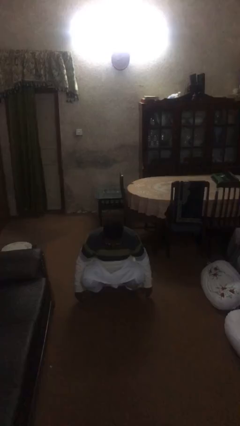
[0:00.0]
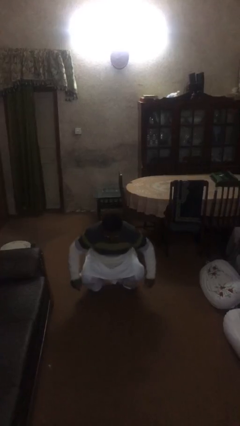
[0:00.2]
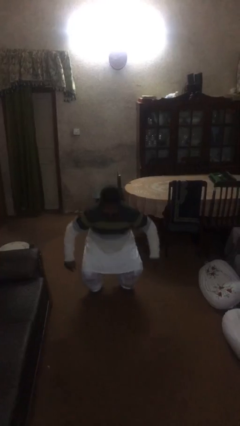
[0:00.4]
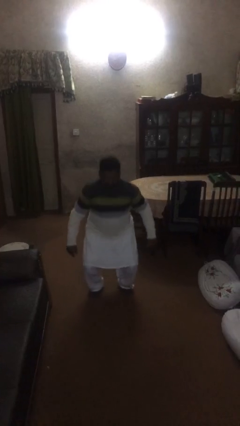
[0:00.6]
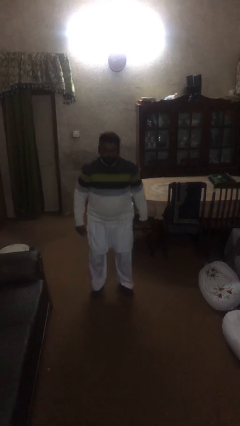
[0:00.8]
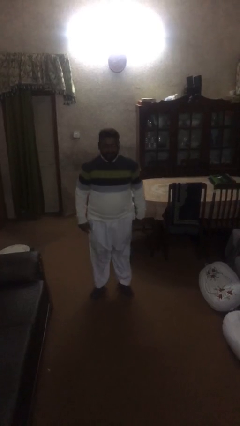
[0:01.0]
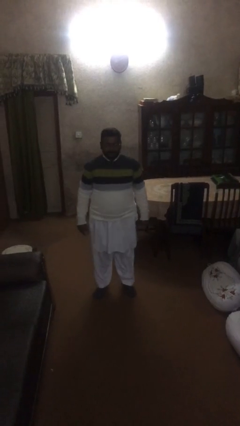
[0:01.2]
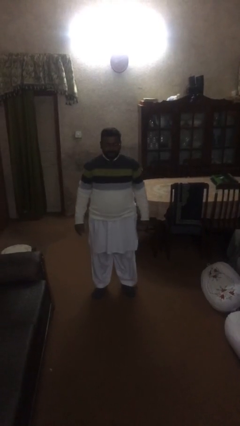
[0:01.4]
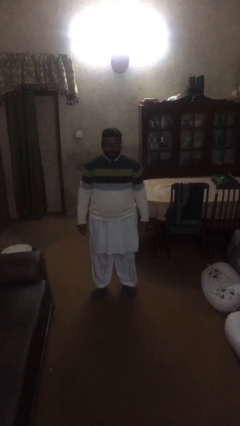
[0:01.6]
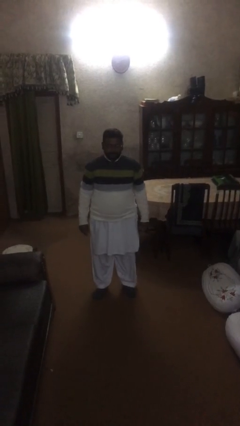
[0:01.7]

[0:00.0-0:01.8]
person stands up

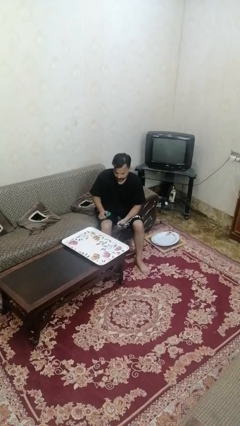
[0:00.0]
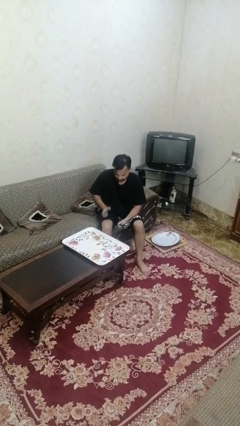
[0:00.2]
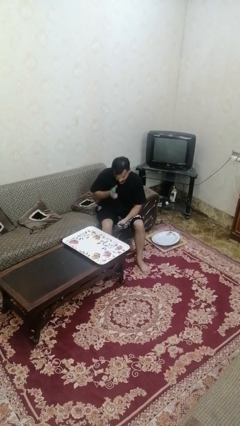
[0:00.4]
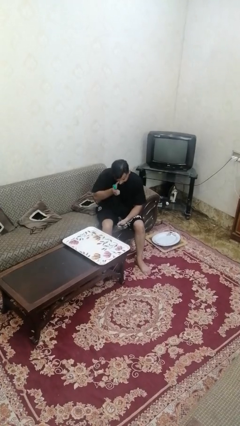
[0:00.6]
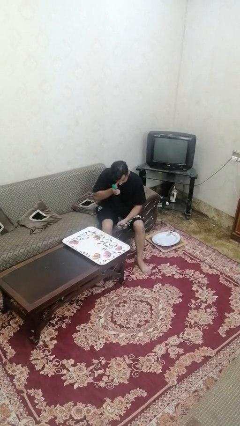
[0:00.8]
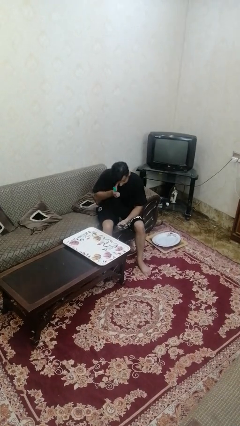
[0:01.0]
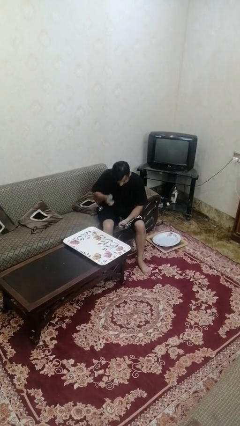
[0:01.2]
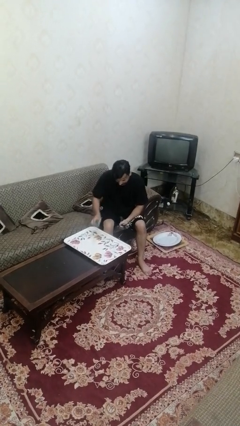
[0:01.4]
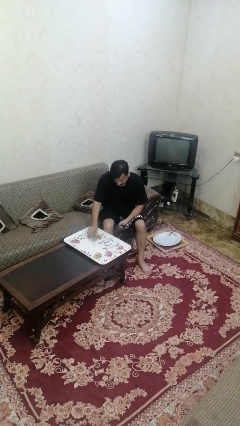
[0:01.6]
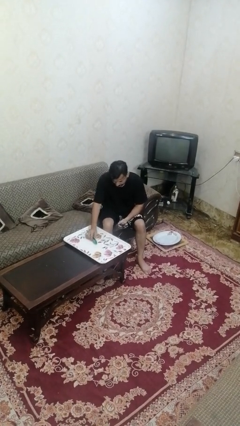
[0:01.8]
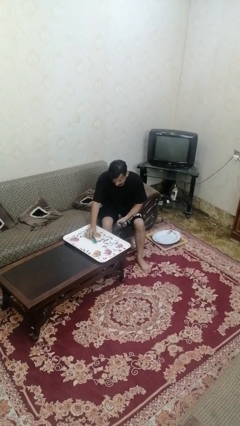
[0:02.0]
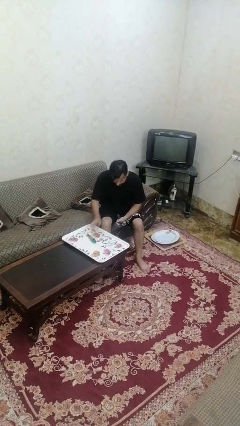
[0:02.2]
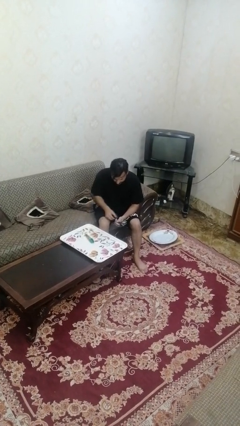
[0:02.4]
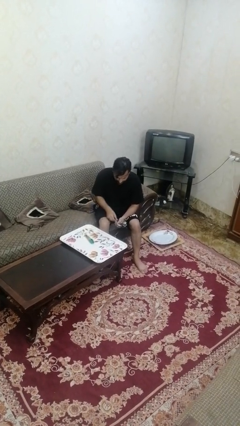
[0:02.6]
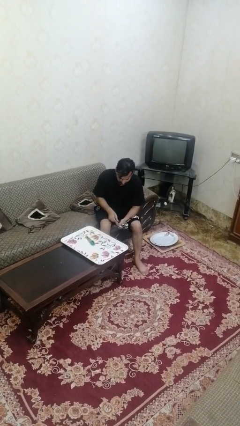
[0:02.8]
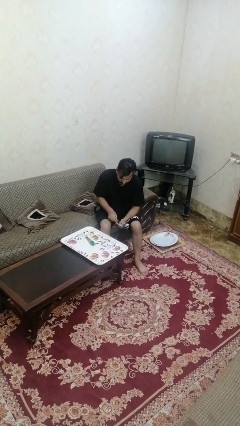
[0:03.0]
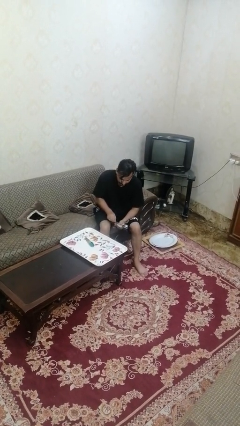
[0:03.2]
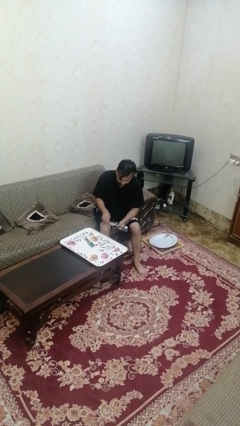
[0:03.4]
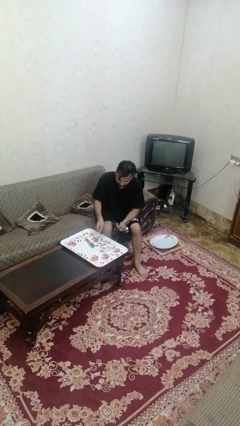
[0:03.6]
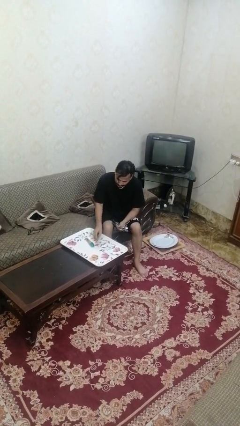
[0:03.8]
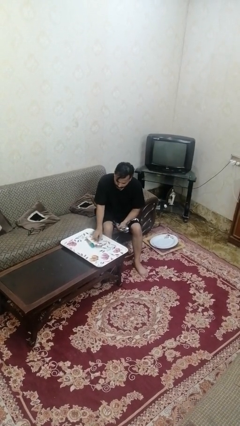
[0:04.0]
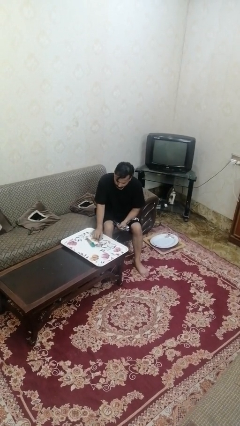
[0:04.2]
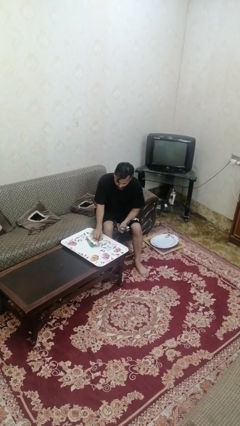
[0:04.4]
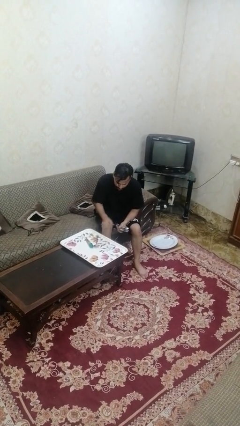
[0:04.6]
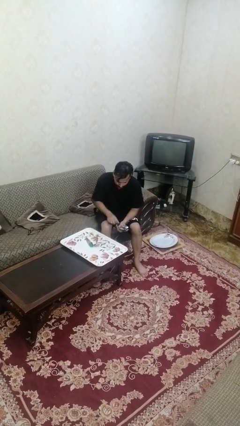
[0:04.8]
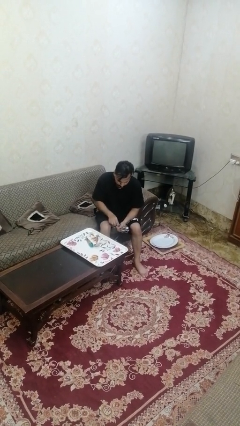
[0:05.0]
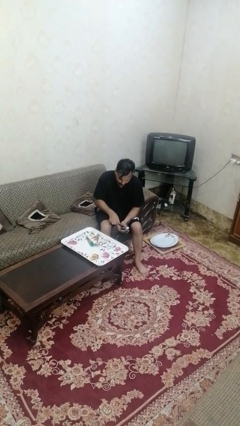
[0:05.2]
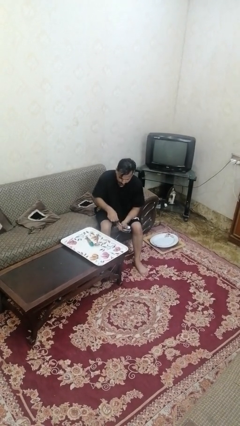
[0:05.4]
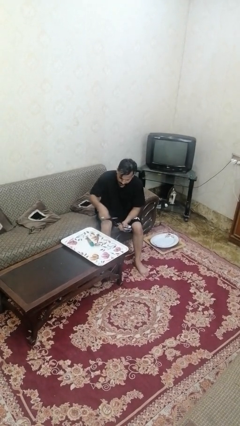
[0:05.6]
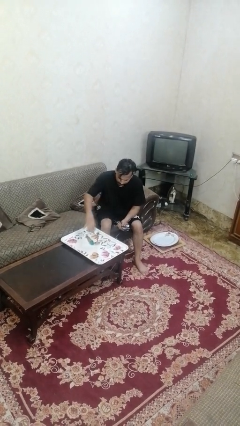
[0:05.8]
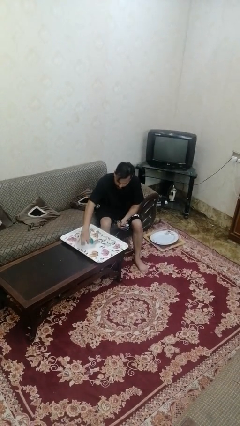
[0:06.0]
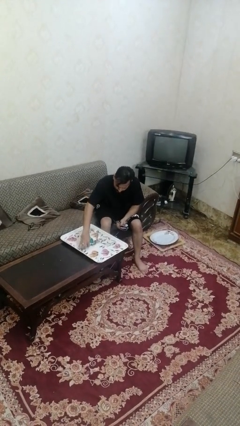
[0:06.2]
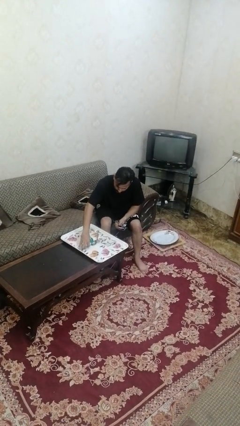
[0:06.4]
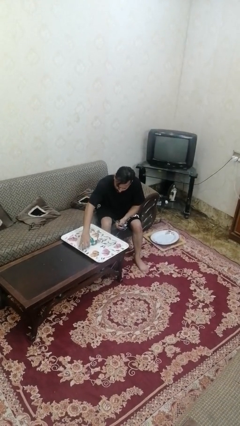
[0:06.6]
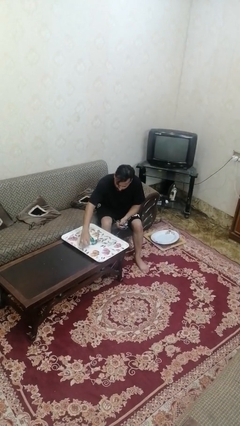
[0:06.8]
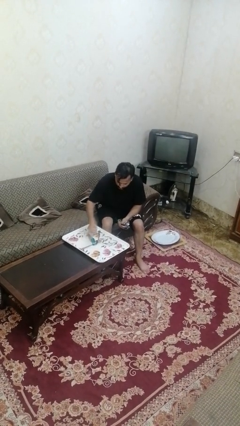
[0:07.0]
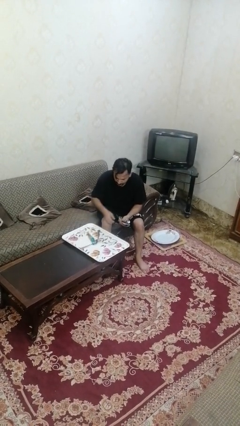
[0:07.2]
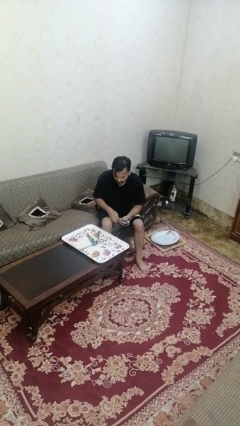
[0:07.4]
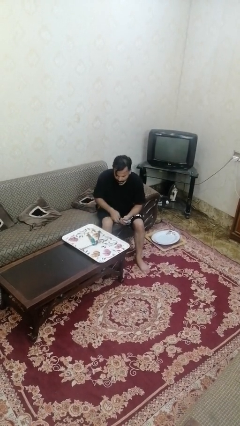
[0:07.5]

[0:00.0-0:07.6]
person sets table

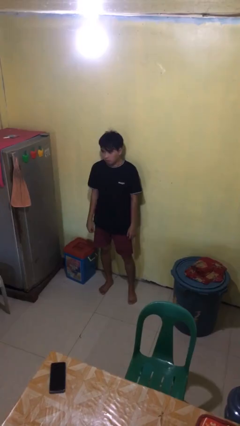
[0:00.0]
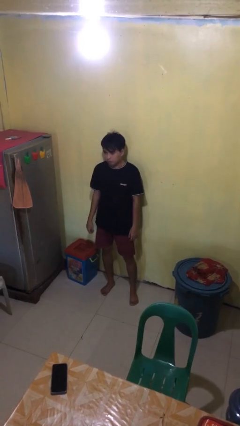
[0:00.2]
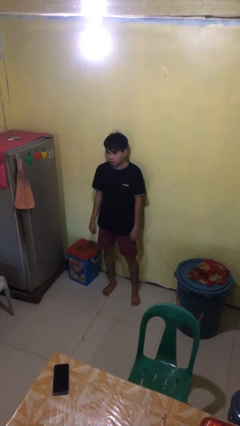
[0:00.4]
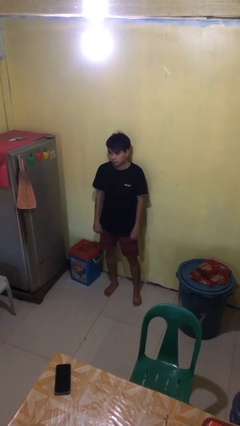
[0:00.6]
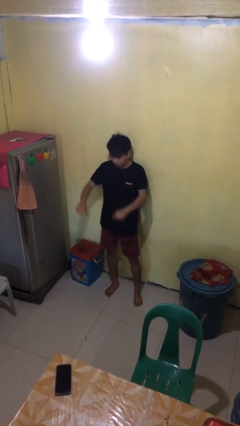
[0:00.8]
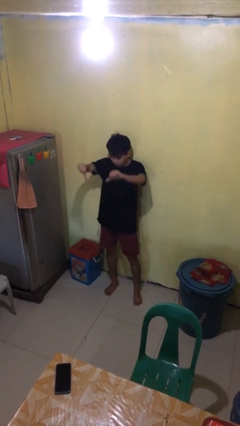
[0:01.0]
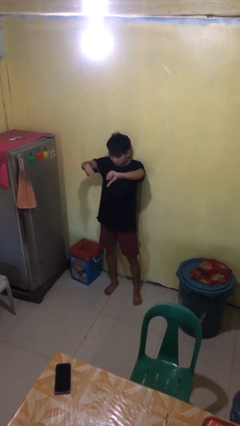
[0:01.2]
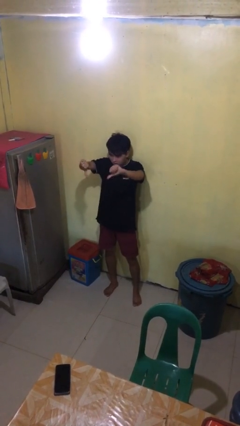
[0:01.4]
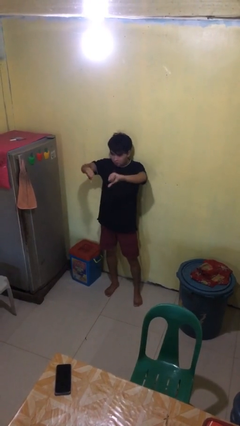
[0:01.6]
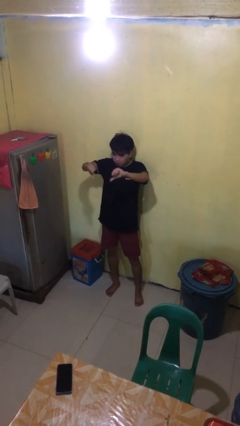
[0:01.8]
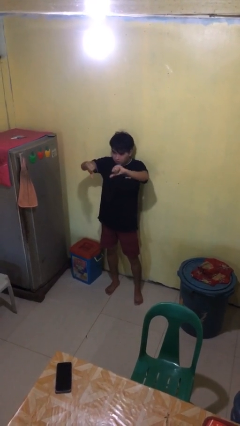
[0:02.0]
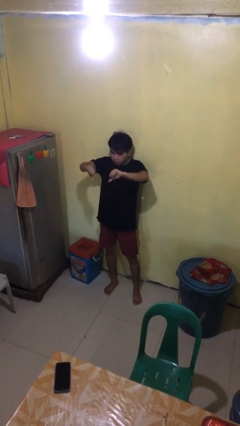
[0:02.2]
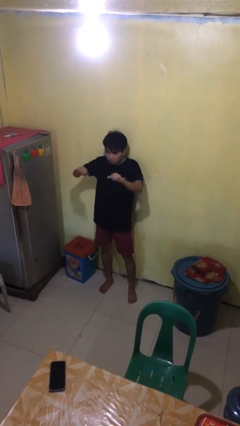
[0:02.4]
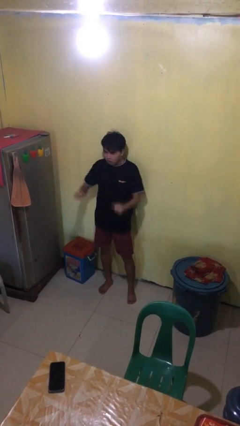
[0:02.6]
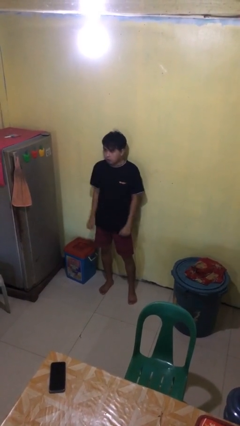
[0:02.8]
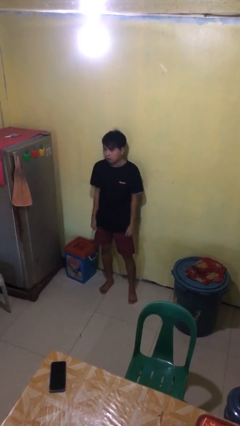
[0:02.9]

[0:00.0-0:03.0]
person gestures thumbs down

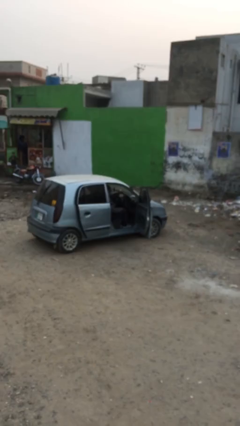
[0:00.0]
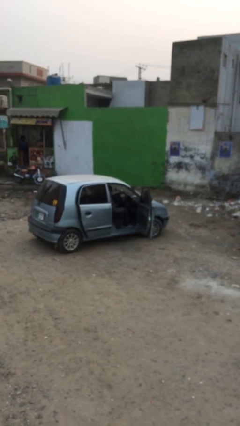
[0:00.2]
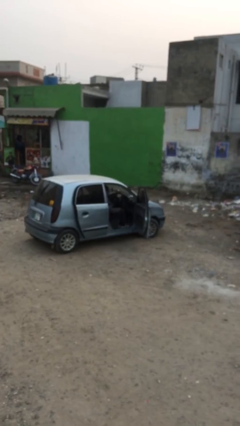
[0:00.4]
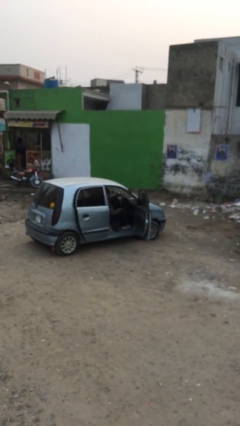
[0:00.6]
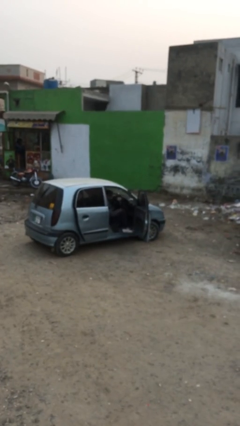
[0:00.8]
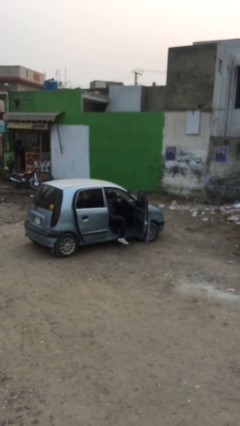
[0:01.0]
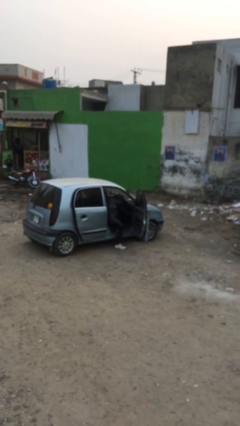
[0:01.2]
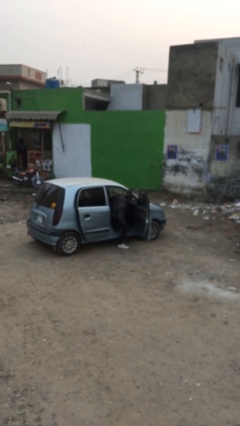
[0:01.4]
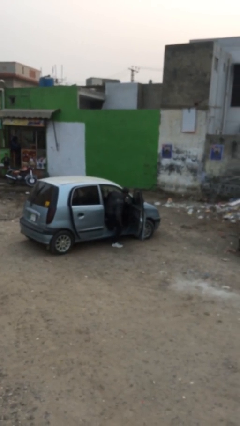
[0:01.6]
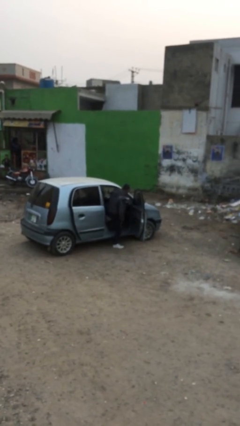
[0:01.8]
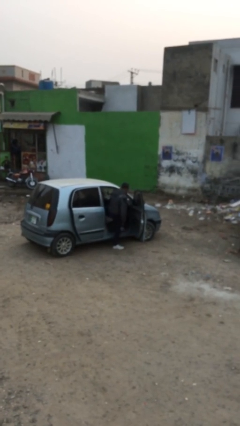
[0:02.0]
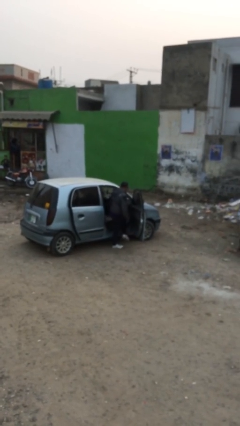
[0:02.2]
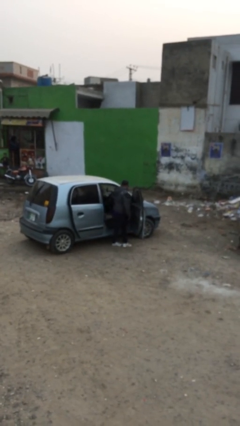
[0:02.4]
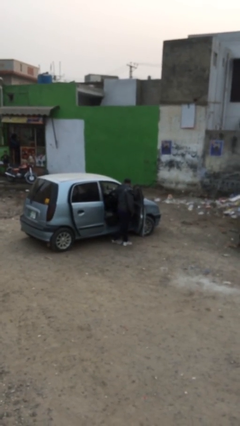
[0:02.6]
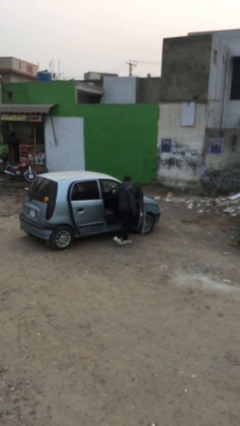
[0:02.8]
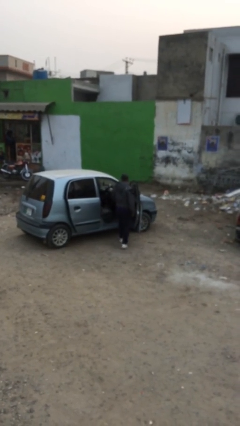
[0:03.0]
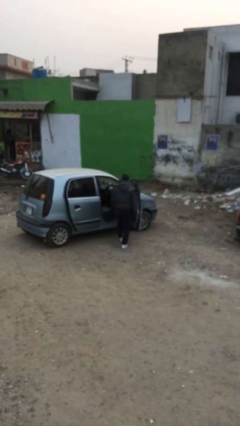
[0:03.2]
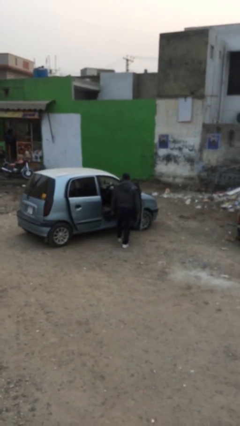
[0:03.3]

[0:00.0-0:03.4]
person exits car

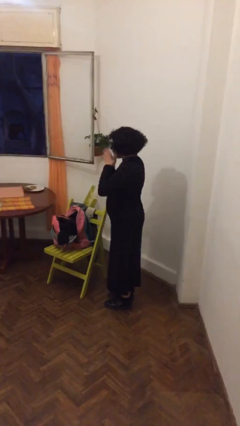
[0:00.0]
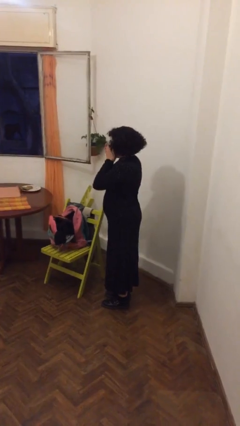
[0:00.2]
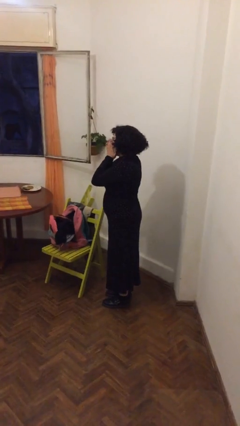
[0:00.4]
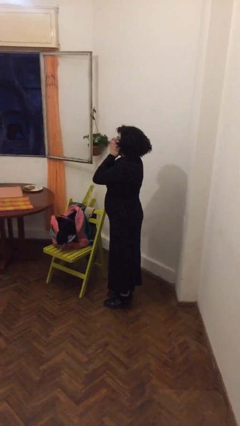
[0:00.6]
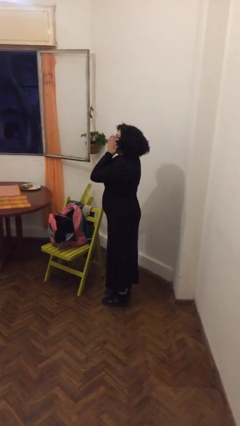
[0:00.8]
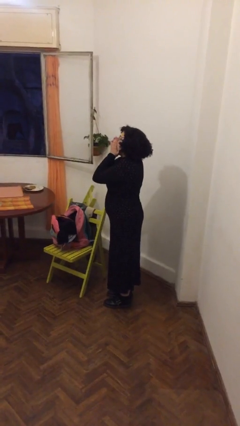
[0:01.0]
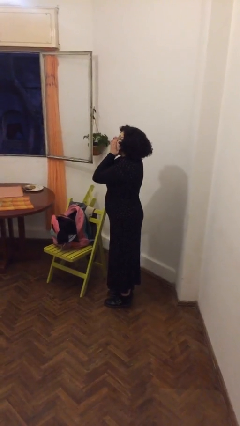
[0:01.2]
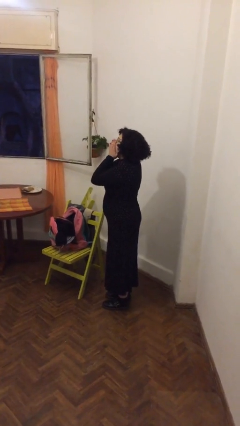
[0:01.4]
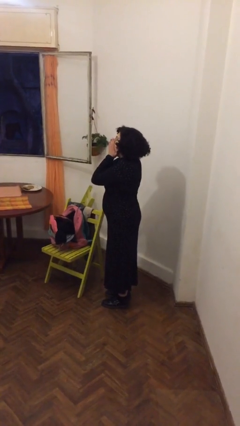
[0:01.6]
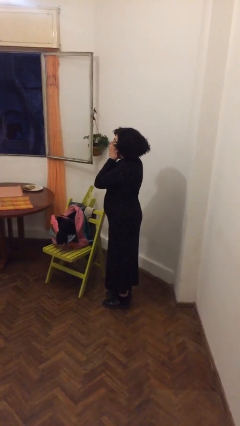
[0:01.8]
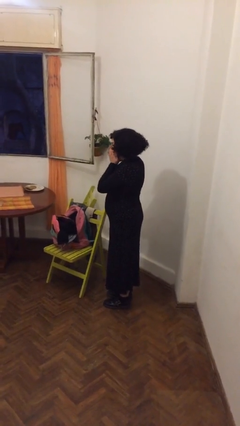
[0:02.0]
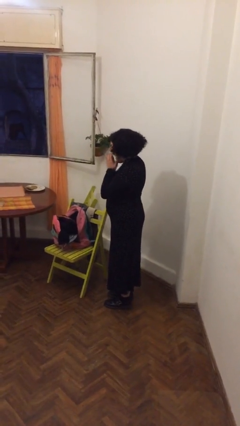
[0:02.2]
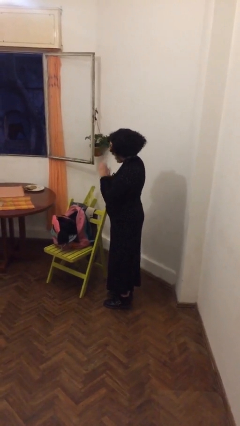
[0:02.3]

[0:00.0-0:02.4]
person yawns
